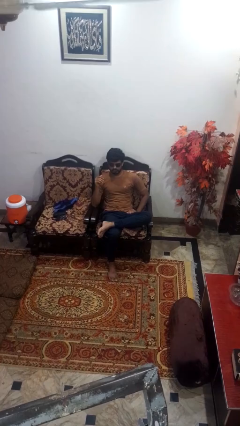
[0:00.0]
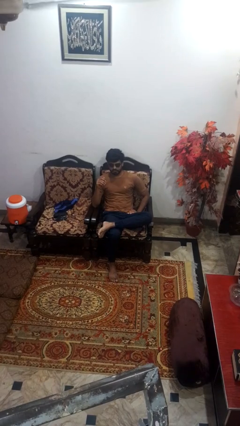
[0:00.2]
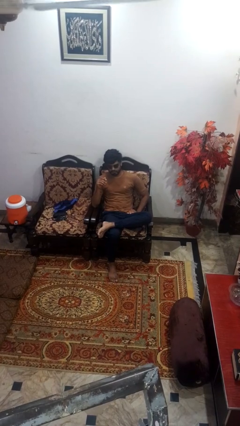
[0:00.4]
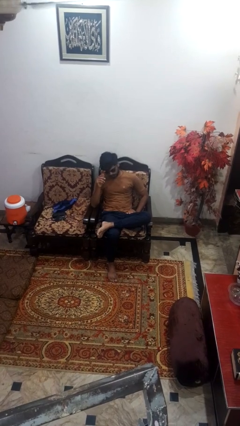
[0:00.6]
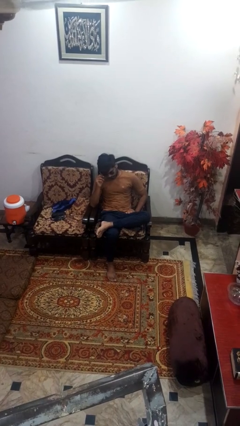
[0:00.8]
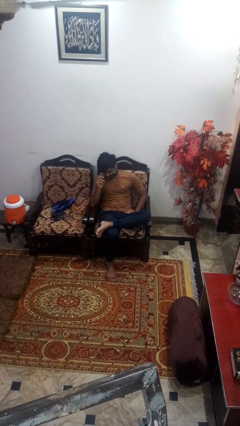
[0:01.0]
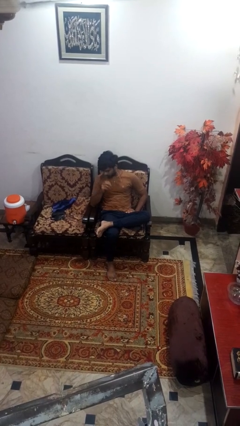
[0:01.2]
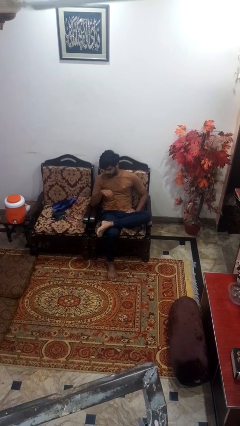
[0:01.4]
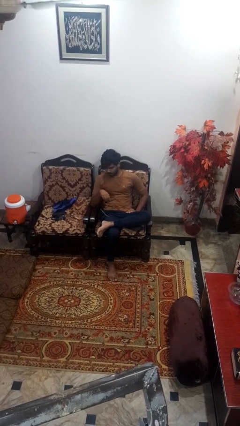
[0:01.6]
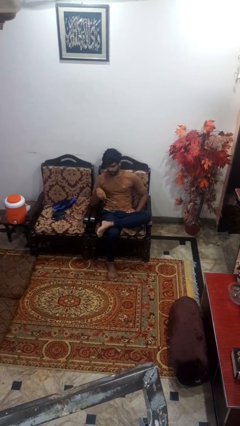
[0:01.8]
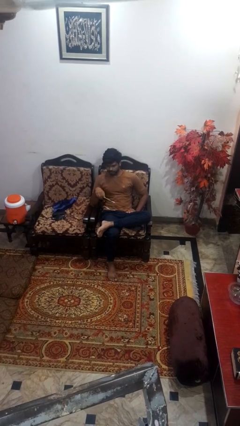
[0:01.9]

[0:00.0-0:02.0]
person takes off sunglasses

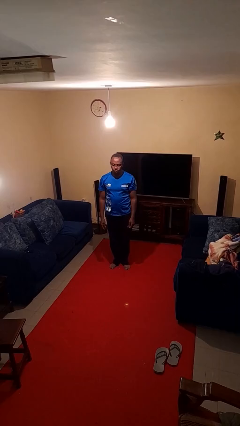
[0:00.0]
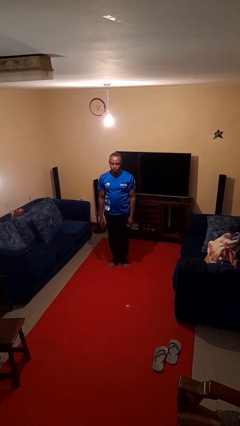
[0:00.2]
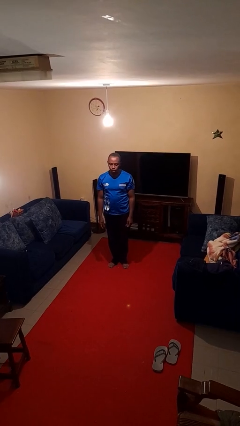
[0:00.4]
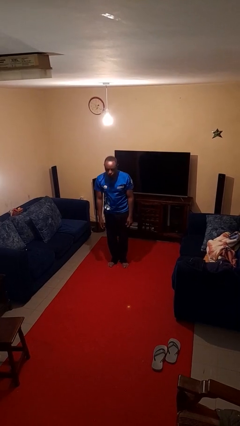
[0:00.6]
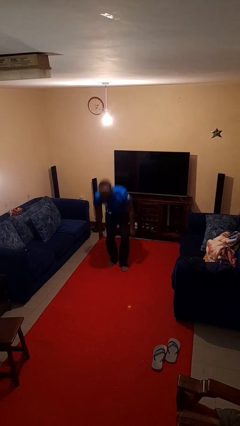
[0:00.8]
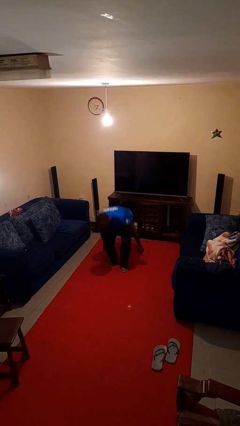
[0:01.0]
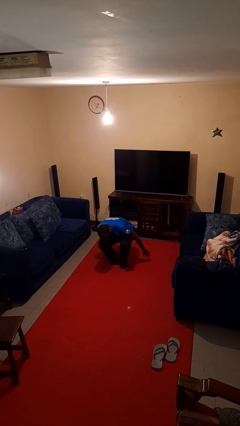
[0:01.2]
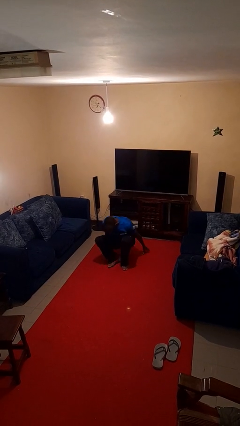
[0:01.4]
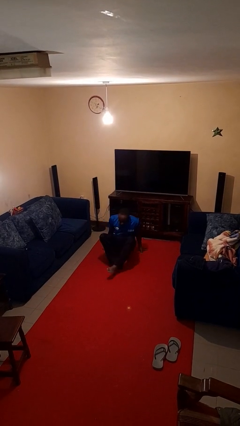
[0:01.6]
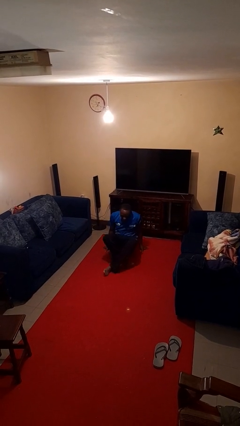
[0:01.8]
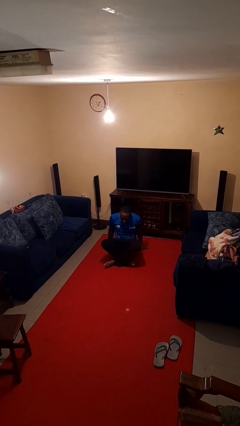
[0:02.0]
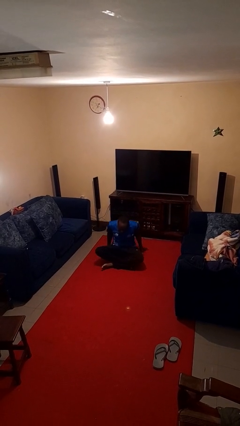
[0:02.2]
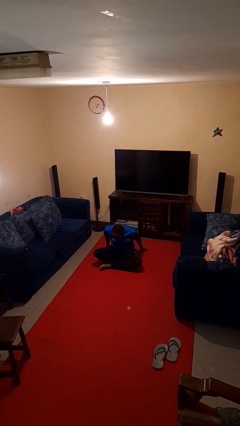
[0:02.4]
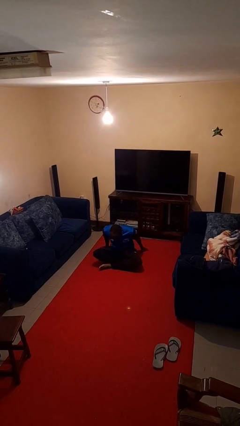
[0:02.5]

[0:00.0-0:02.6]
person sits crisscross

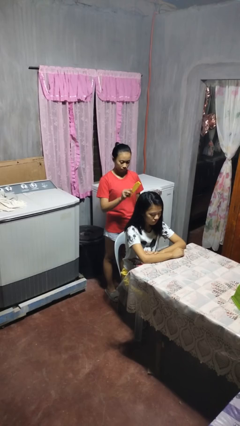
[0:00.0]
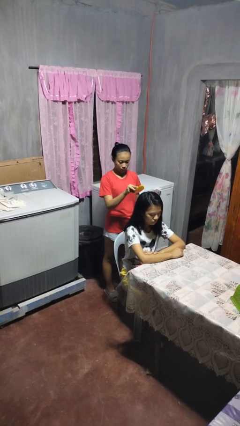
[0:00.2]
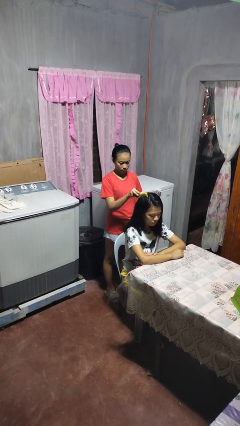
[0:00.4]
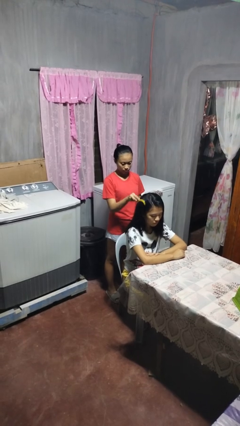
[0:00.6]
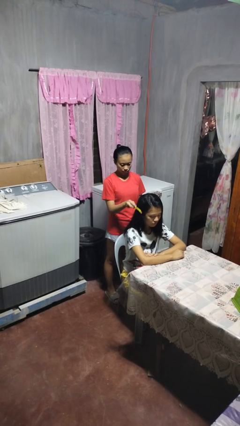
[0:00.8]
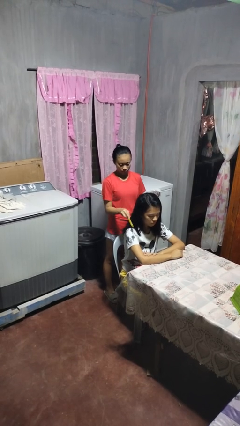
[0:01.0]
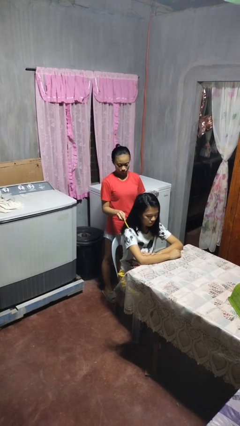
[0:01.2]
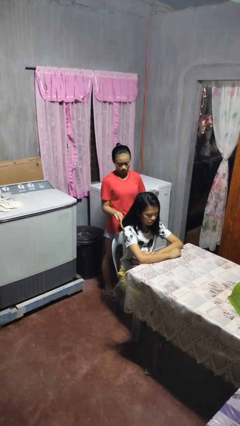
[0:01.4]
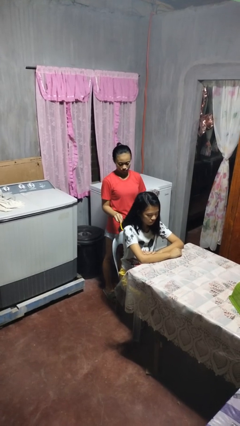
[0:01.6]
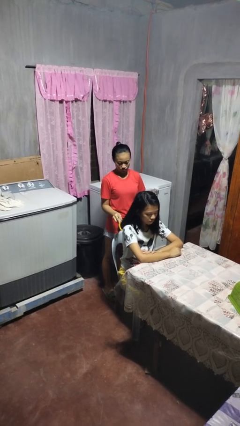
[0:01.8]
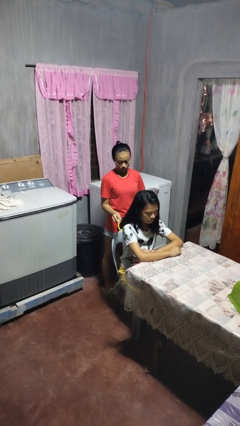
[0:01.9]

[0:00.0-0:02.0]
person brushes hair of person

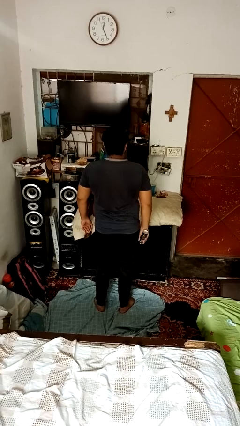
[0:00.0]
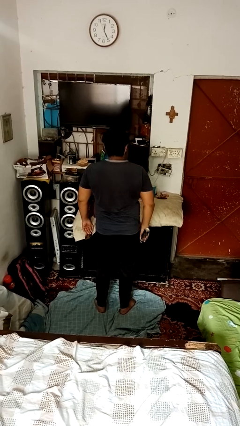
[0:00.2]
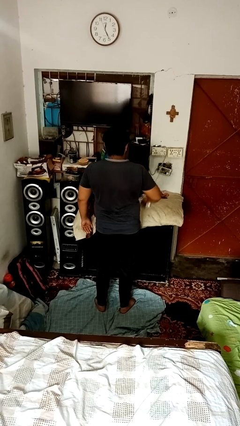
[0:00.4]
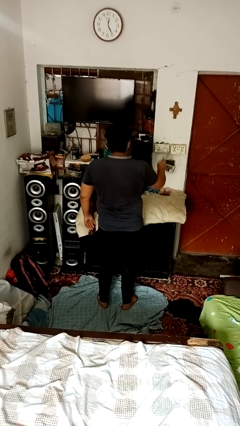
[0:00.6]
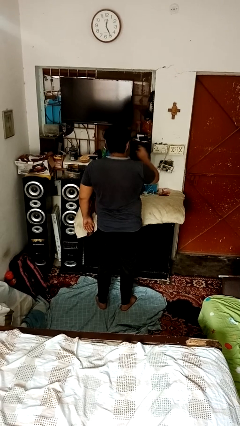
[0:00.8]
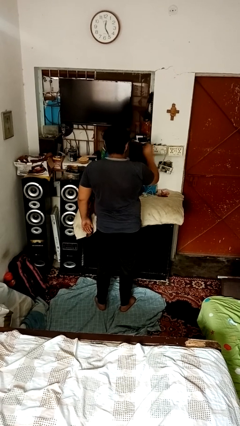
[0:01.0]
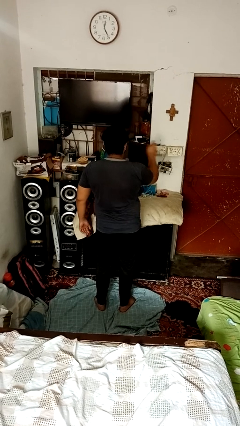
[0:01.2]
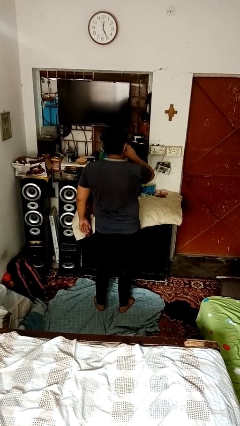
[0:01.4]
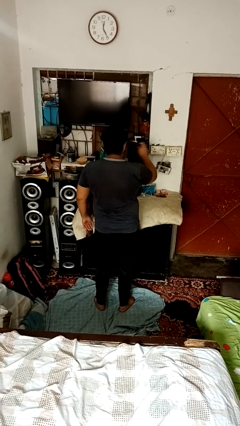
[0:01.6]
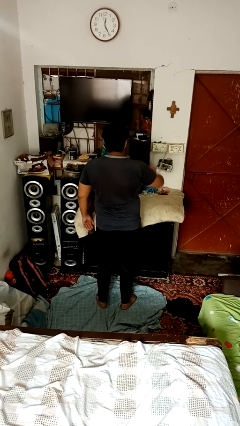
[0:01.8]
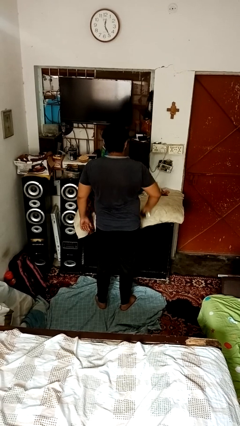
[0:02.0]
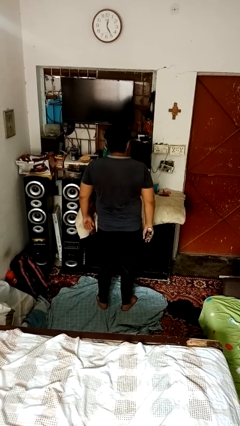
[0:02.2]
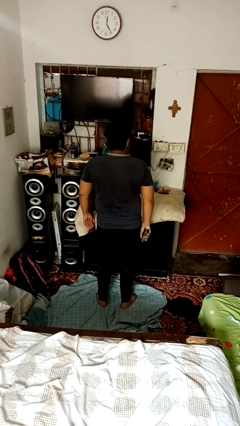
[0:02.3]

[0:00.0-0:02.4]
person sprays from bottle

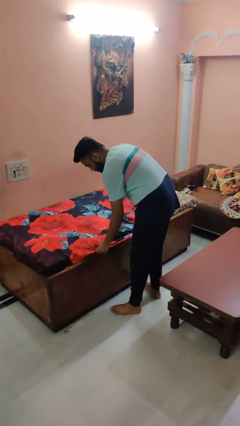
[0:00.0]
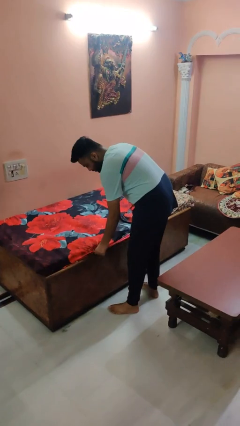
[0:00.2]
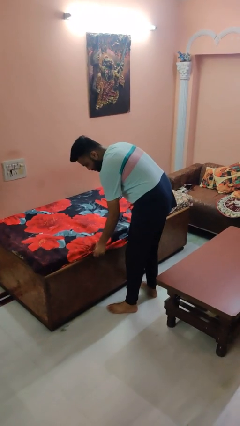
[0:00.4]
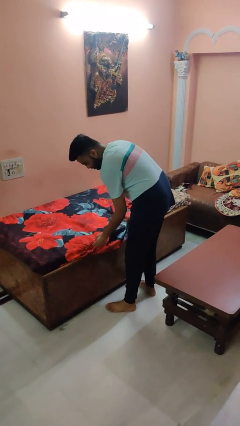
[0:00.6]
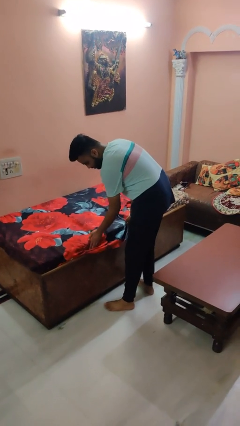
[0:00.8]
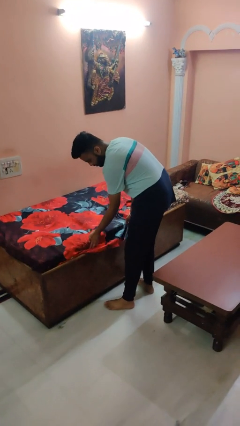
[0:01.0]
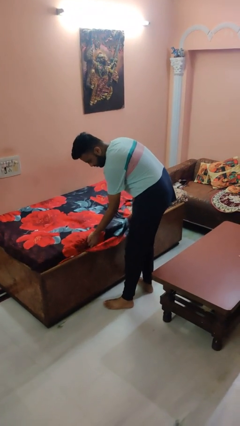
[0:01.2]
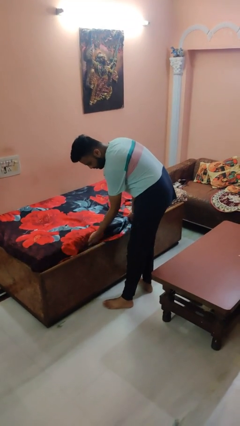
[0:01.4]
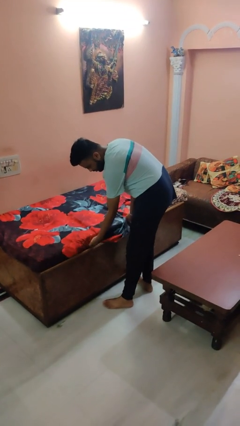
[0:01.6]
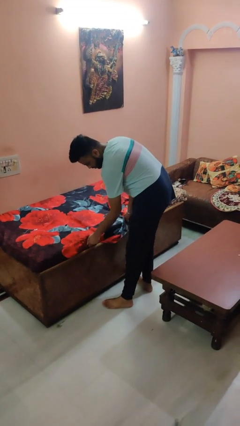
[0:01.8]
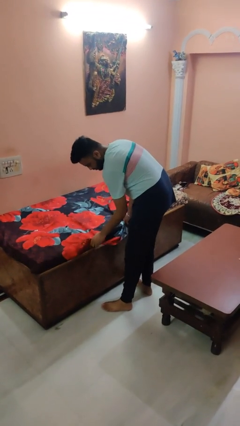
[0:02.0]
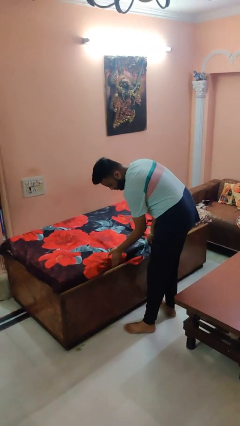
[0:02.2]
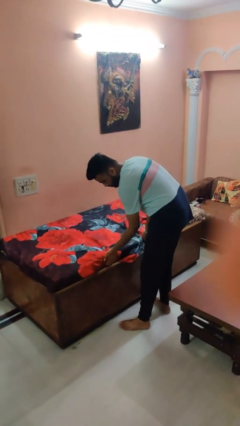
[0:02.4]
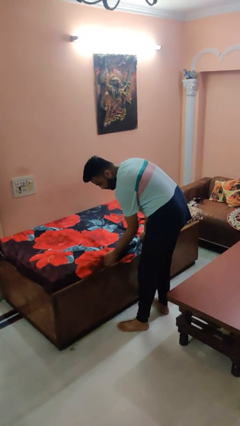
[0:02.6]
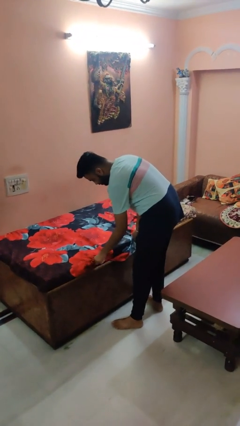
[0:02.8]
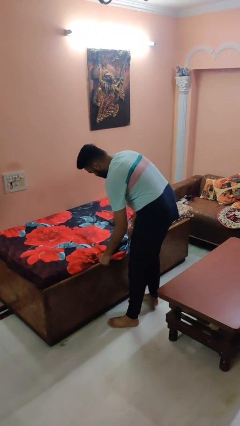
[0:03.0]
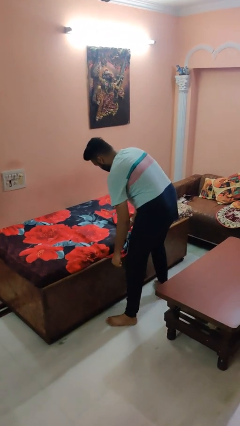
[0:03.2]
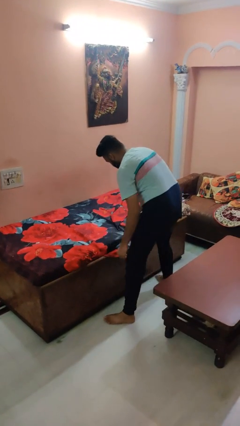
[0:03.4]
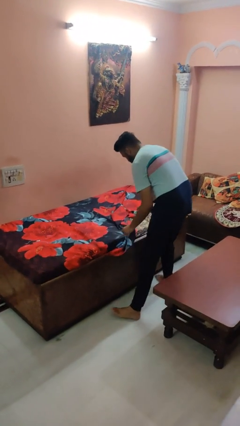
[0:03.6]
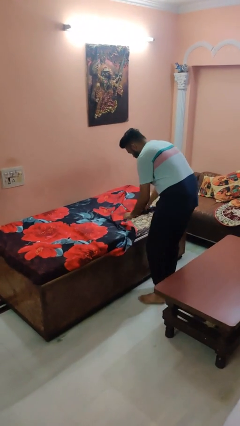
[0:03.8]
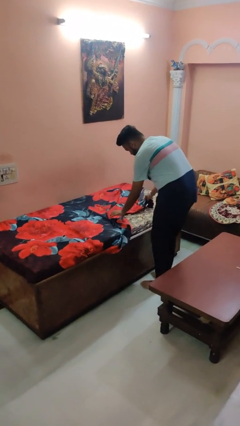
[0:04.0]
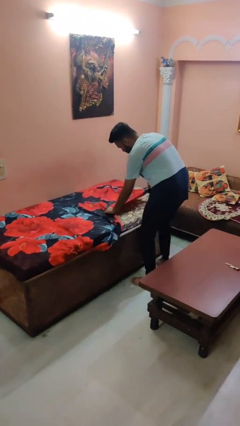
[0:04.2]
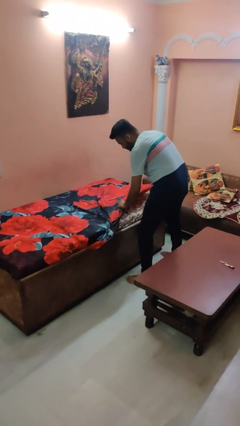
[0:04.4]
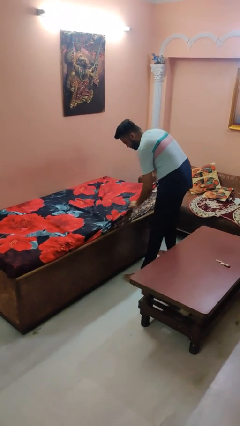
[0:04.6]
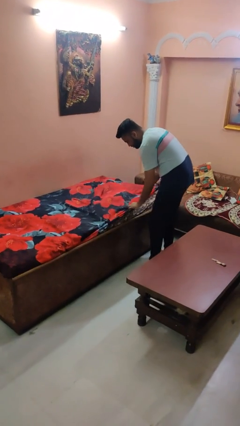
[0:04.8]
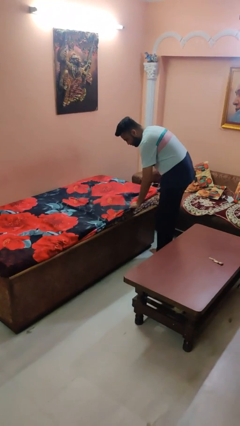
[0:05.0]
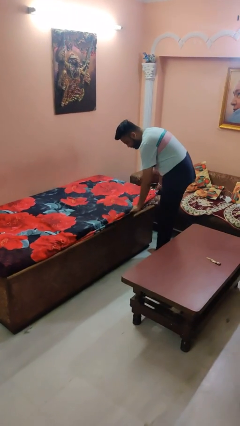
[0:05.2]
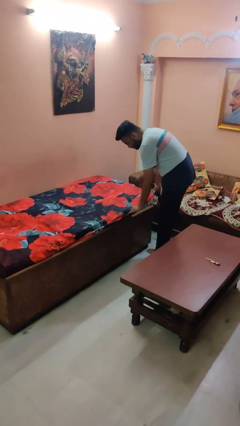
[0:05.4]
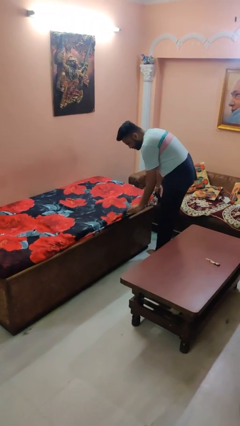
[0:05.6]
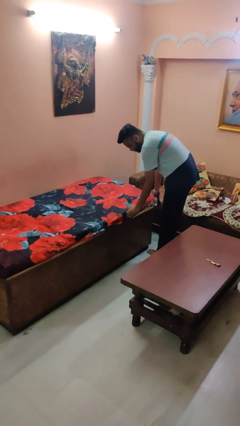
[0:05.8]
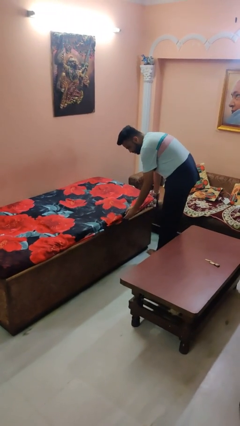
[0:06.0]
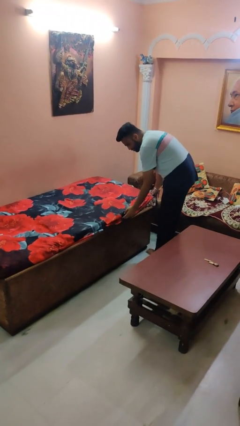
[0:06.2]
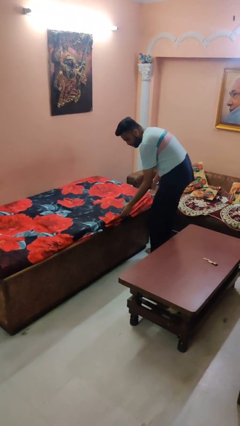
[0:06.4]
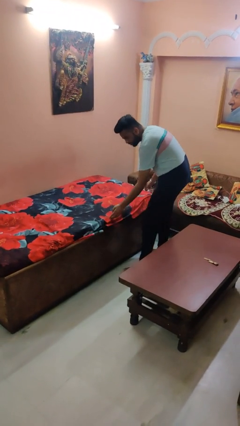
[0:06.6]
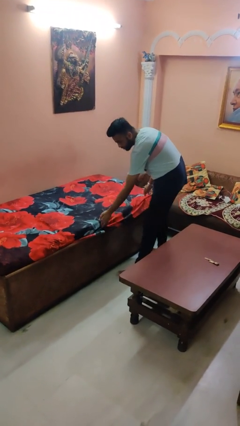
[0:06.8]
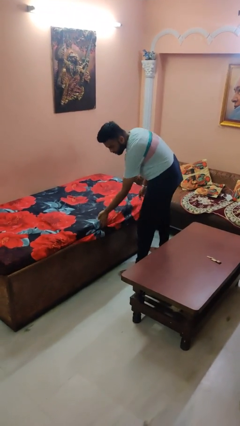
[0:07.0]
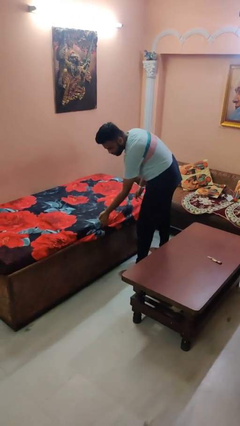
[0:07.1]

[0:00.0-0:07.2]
person makes bed

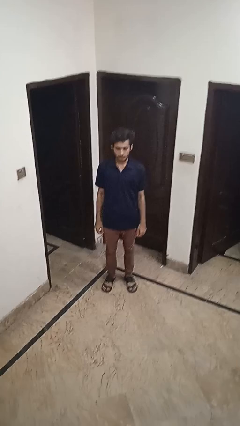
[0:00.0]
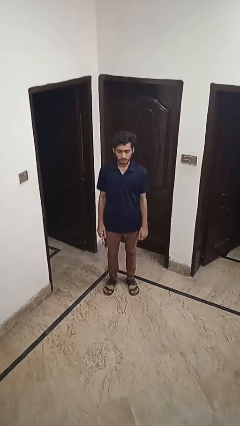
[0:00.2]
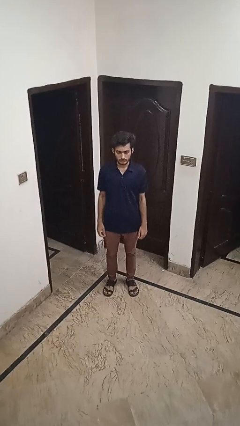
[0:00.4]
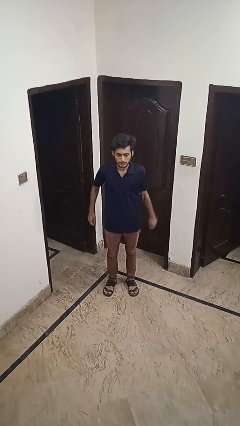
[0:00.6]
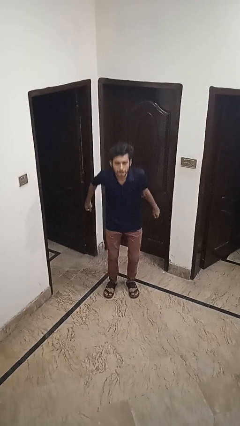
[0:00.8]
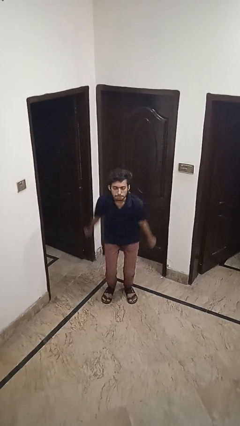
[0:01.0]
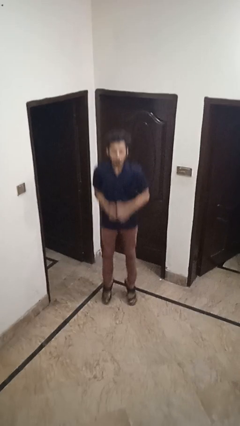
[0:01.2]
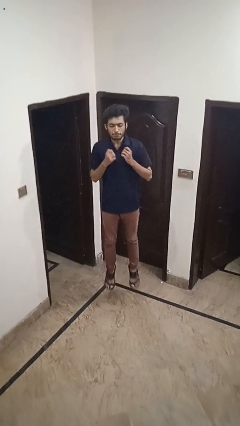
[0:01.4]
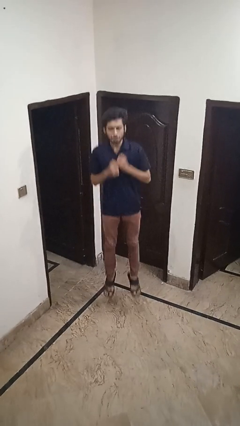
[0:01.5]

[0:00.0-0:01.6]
person jumps
